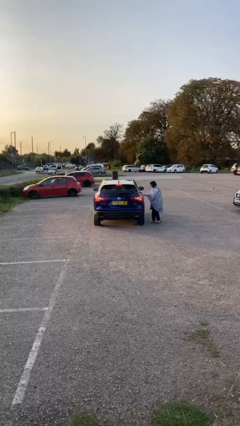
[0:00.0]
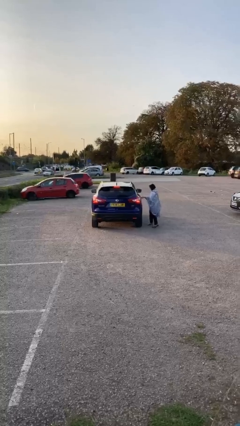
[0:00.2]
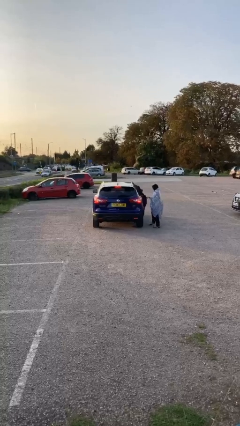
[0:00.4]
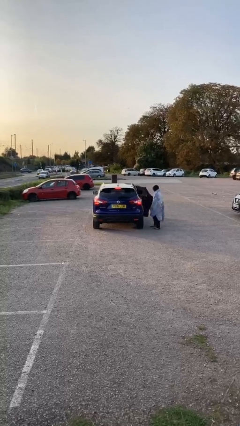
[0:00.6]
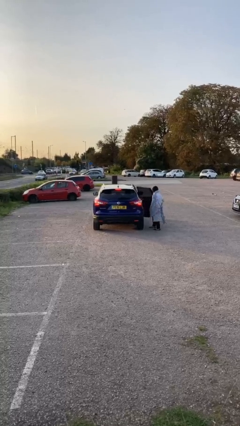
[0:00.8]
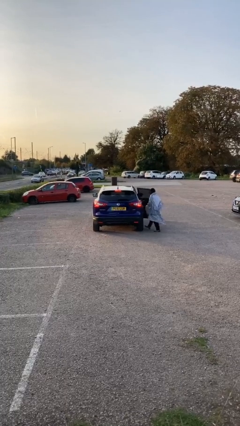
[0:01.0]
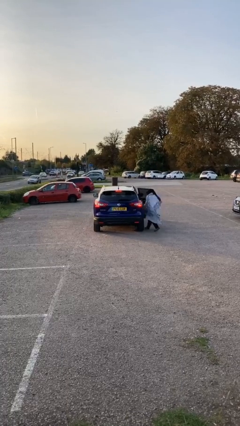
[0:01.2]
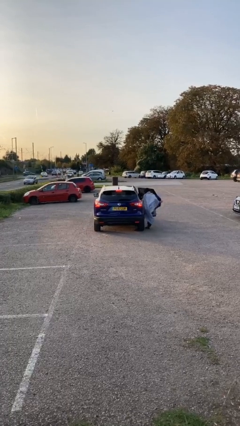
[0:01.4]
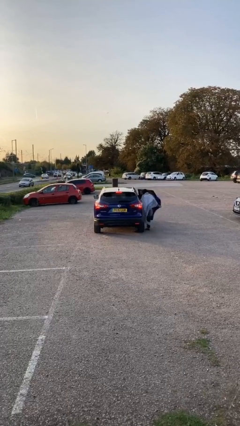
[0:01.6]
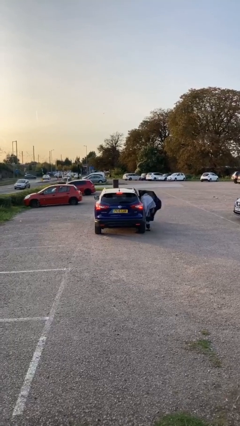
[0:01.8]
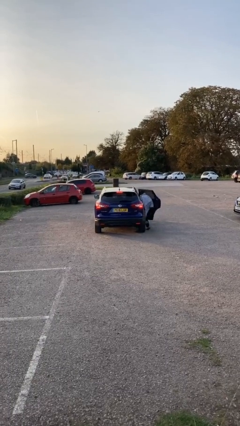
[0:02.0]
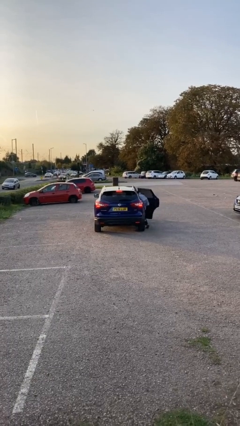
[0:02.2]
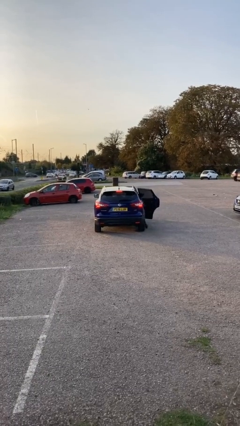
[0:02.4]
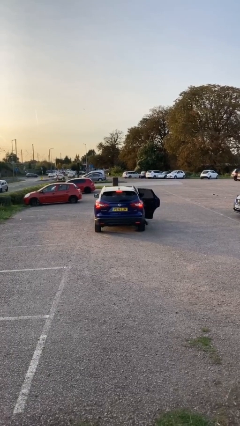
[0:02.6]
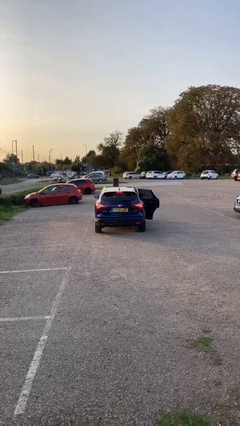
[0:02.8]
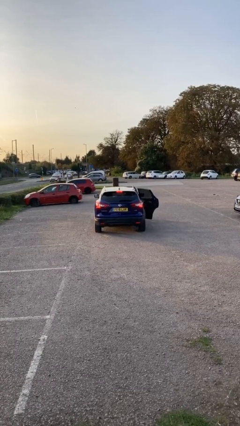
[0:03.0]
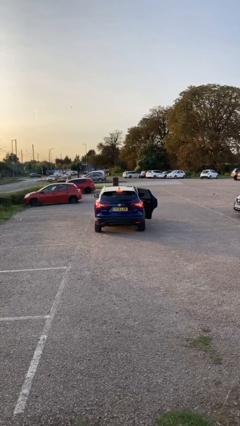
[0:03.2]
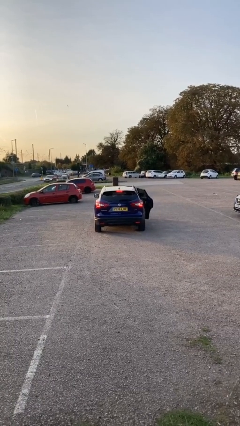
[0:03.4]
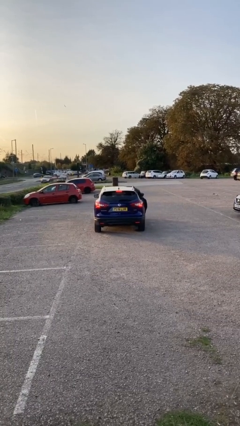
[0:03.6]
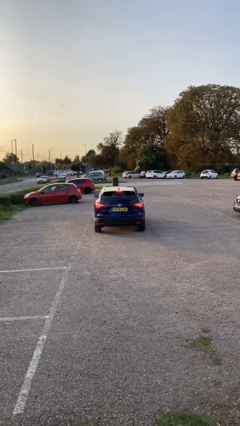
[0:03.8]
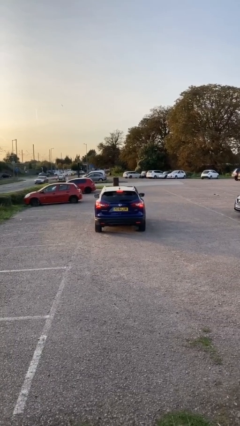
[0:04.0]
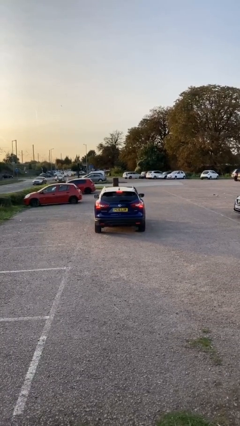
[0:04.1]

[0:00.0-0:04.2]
car picks up person

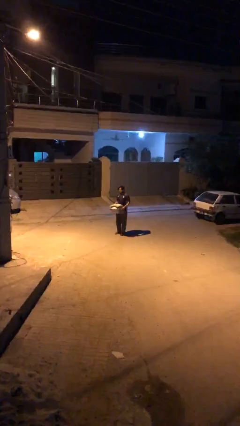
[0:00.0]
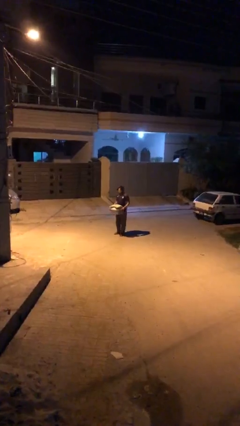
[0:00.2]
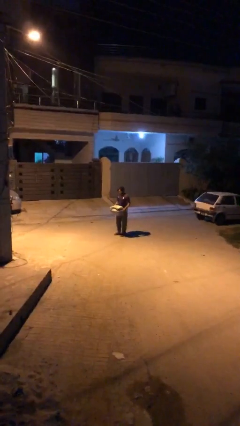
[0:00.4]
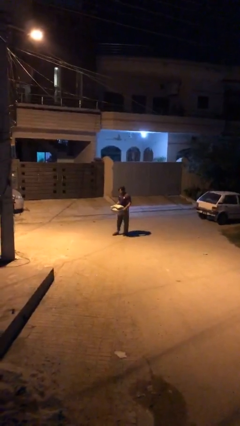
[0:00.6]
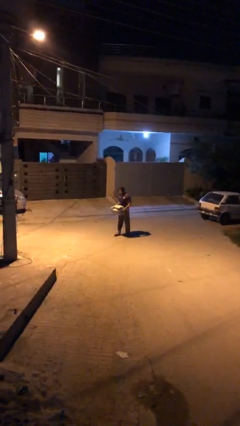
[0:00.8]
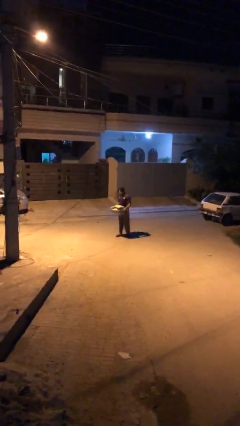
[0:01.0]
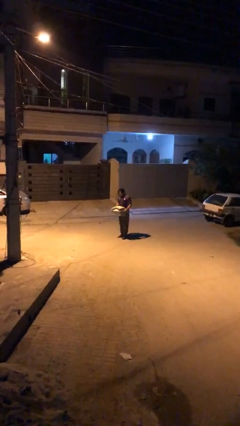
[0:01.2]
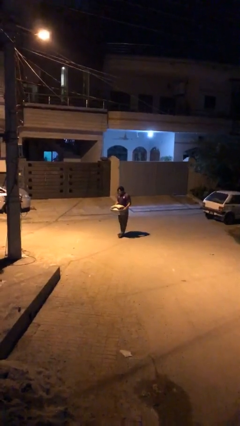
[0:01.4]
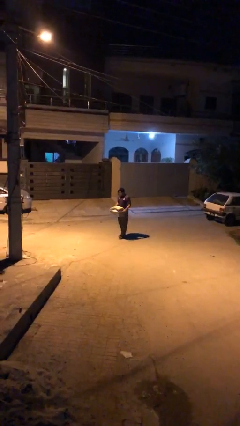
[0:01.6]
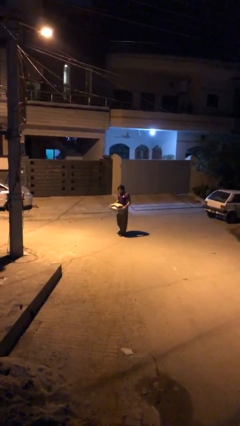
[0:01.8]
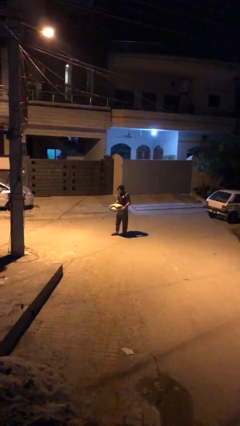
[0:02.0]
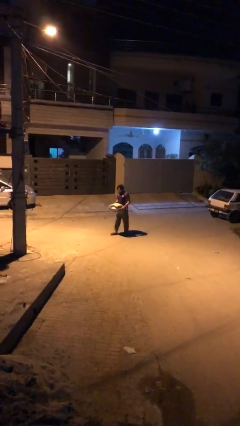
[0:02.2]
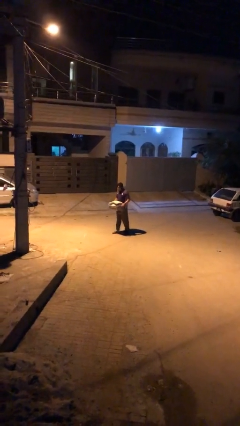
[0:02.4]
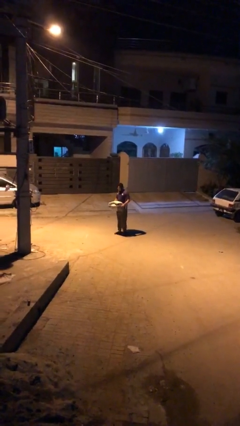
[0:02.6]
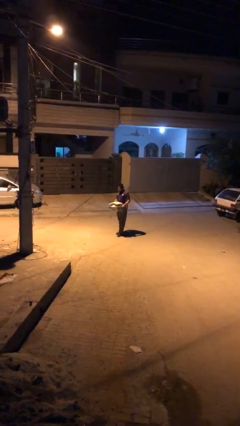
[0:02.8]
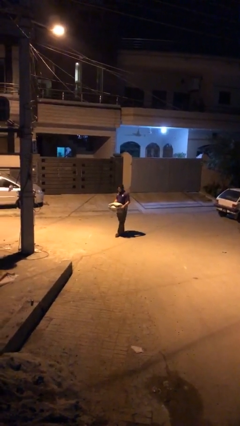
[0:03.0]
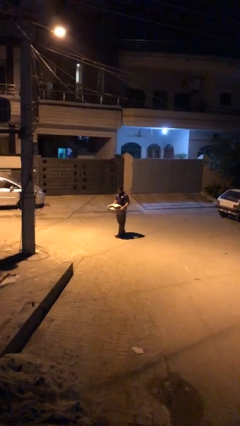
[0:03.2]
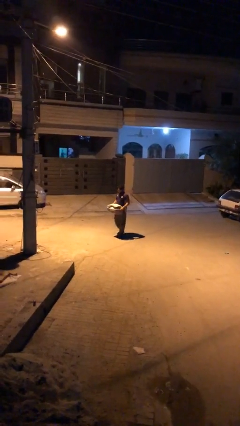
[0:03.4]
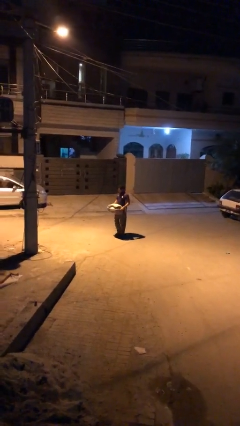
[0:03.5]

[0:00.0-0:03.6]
person carries heavy object

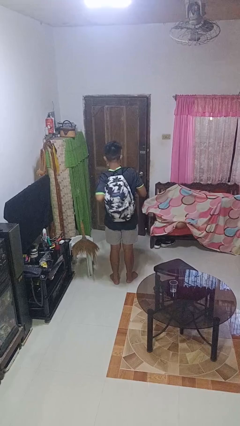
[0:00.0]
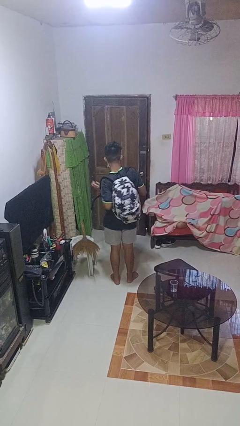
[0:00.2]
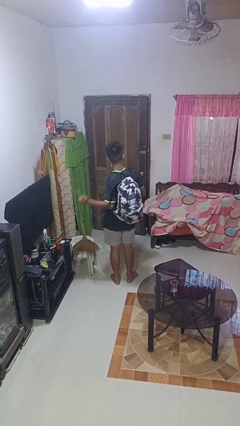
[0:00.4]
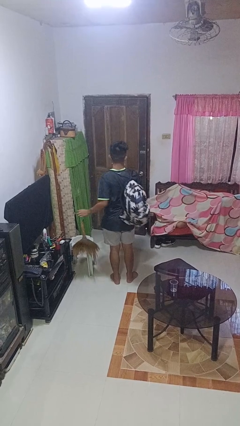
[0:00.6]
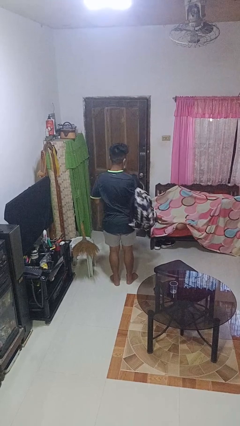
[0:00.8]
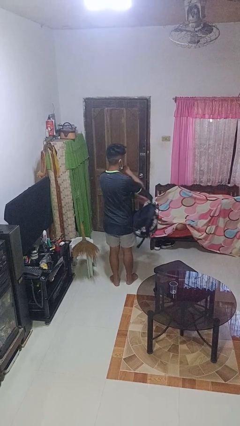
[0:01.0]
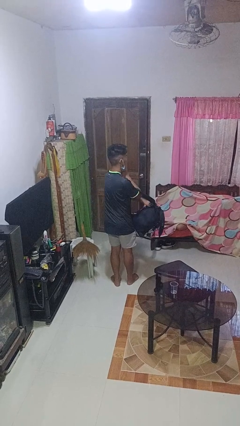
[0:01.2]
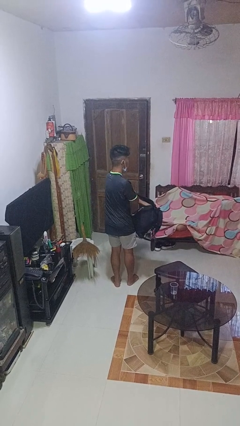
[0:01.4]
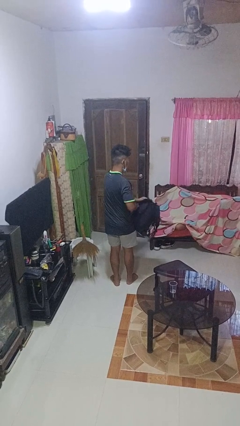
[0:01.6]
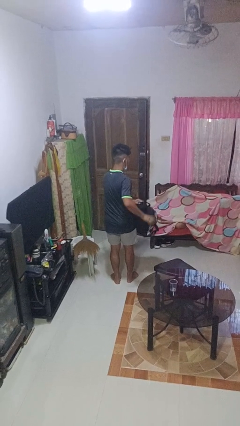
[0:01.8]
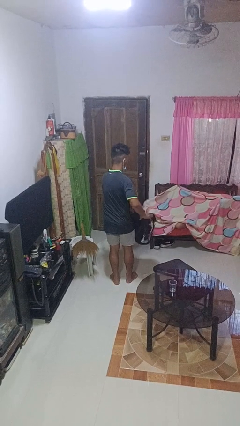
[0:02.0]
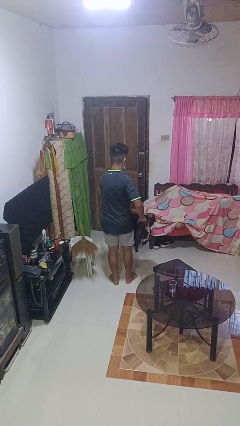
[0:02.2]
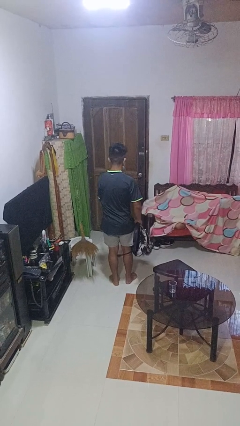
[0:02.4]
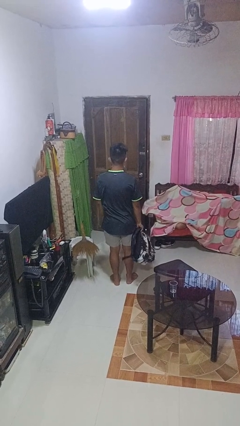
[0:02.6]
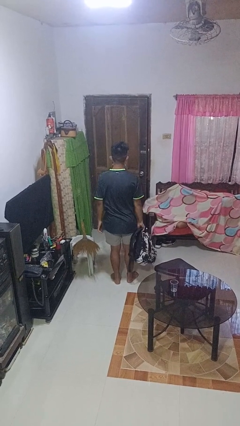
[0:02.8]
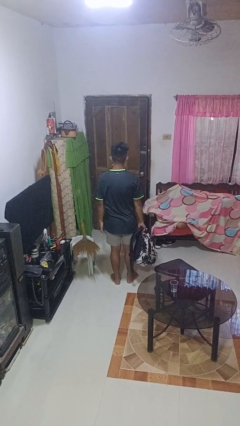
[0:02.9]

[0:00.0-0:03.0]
person takes off backpack

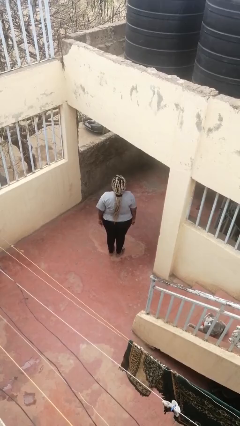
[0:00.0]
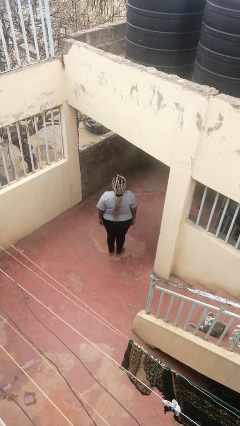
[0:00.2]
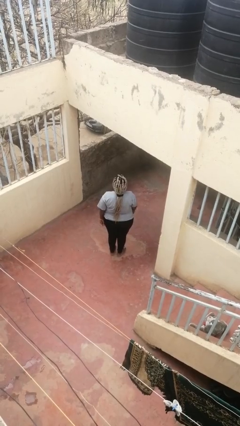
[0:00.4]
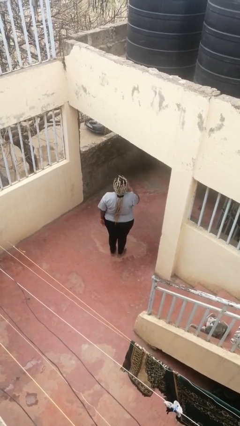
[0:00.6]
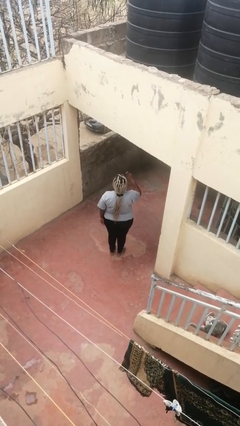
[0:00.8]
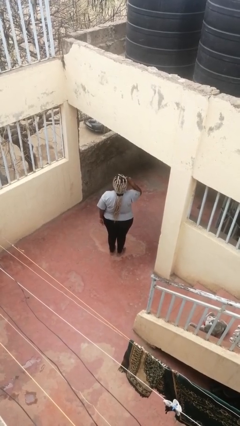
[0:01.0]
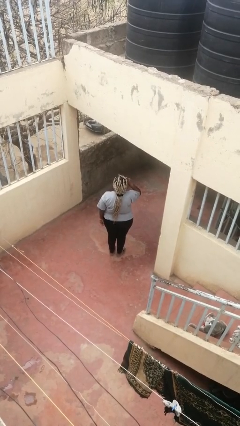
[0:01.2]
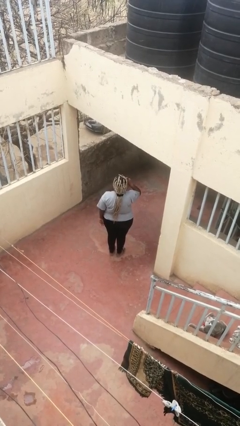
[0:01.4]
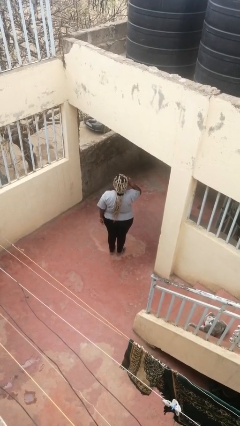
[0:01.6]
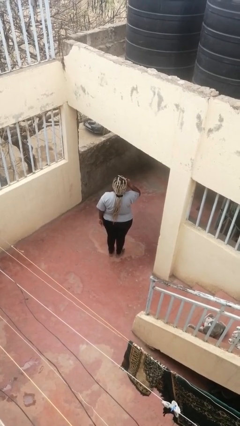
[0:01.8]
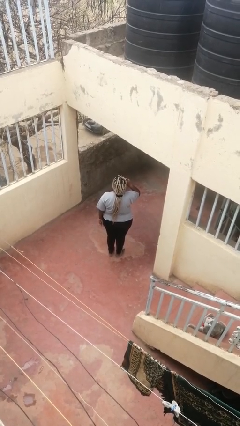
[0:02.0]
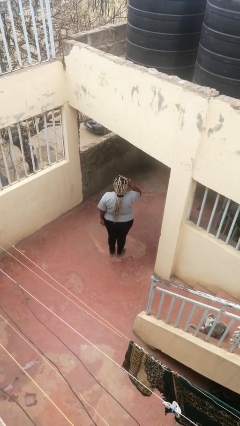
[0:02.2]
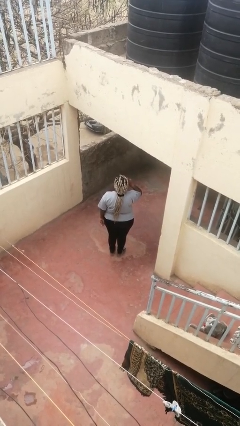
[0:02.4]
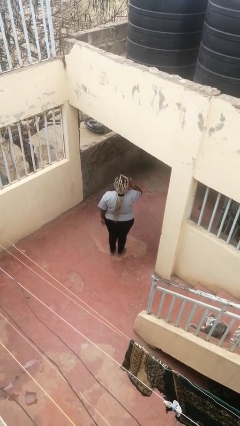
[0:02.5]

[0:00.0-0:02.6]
person salutes

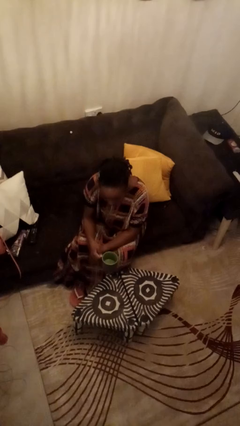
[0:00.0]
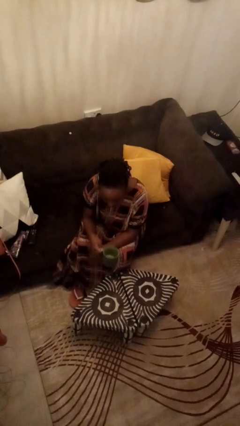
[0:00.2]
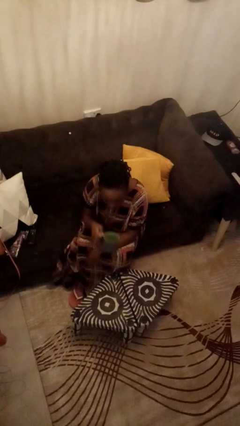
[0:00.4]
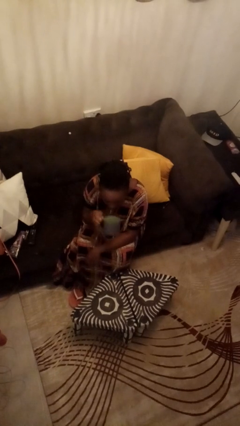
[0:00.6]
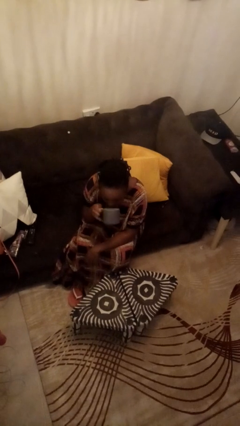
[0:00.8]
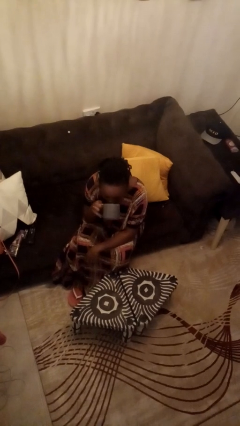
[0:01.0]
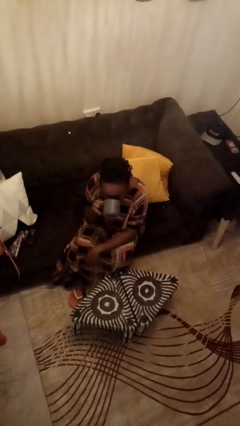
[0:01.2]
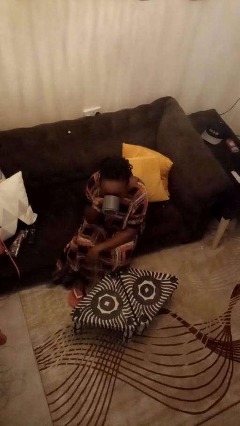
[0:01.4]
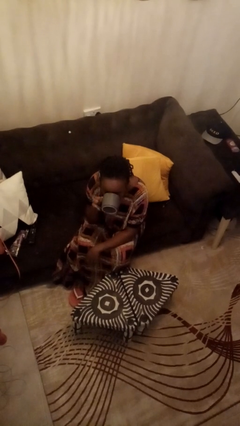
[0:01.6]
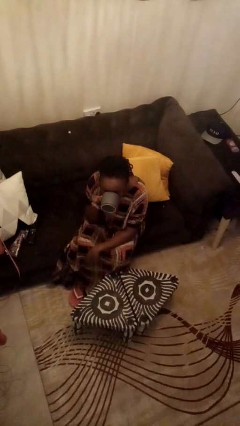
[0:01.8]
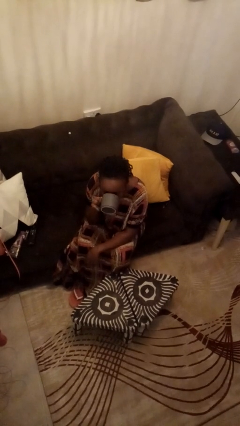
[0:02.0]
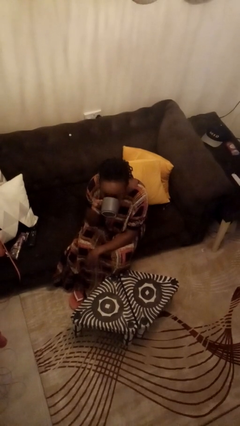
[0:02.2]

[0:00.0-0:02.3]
person drinks from mug

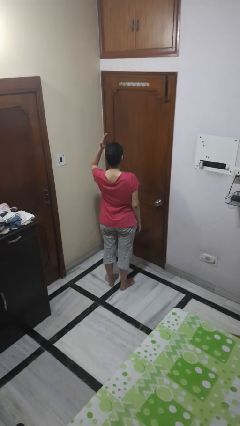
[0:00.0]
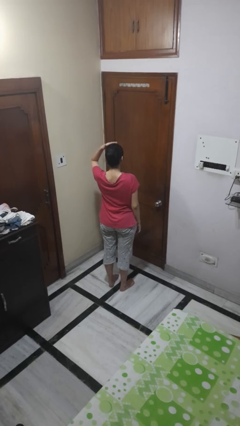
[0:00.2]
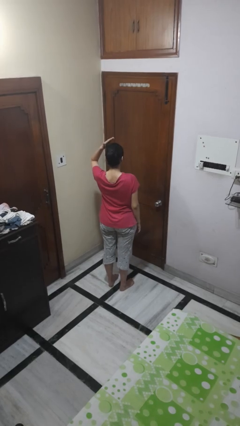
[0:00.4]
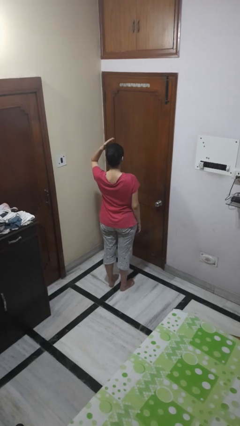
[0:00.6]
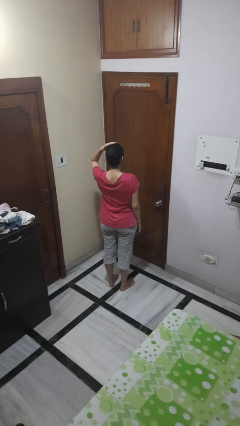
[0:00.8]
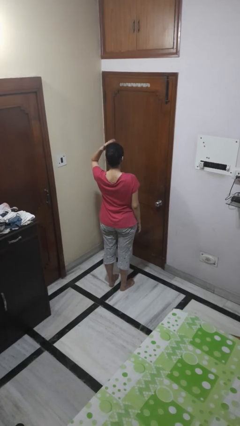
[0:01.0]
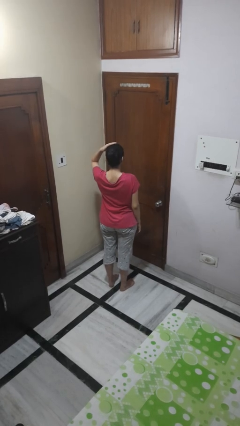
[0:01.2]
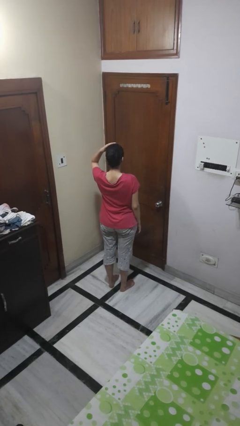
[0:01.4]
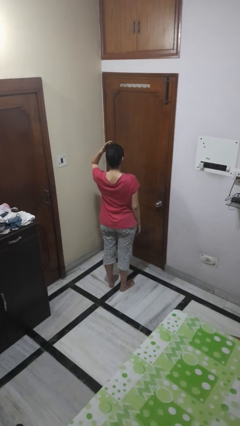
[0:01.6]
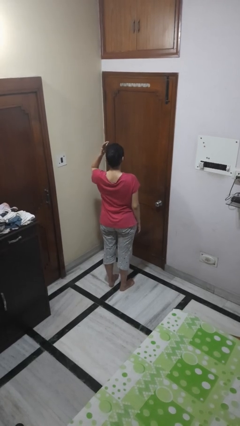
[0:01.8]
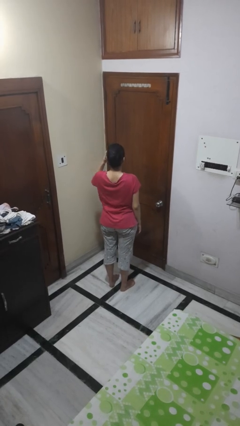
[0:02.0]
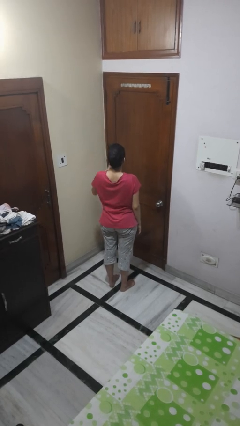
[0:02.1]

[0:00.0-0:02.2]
person pats head
